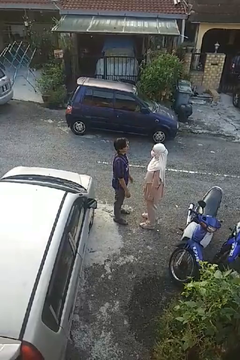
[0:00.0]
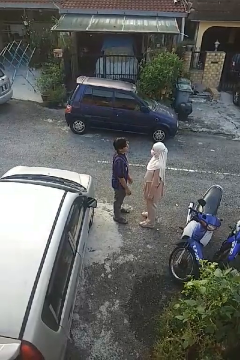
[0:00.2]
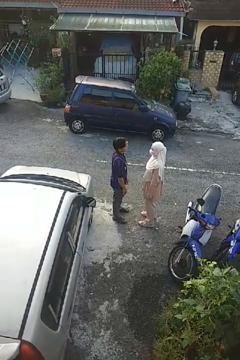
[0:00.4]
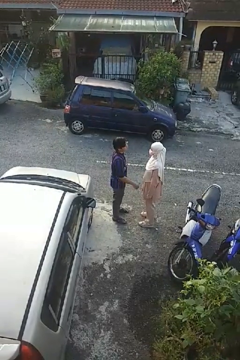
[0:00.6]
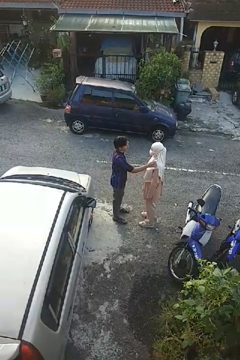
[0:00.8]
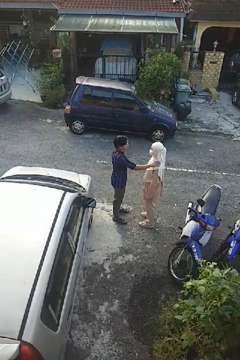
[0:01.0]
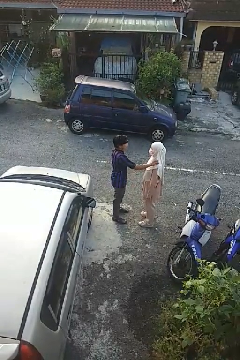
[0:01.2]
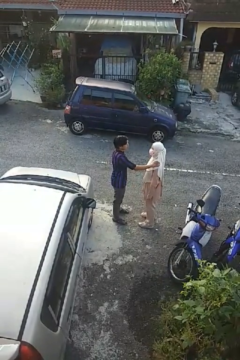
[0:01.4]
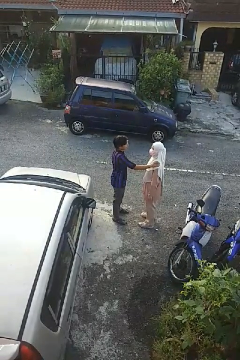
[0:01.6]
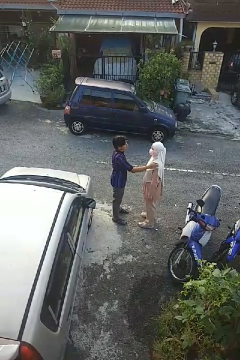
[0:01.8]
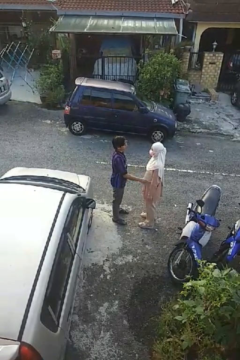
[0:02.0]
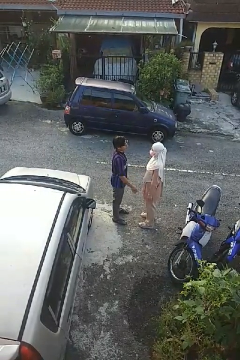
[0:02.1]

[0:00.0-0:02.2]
person pounds shoulders of person

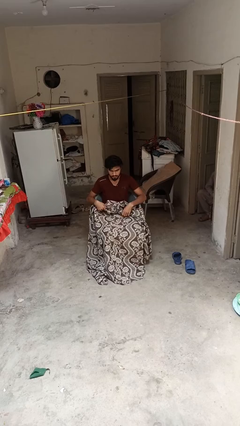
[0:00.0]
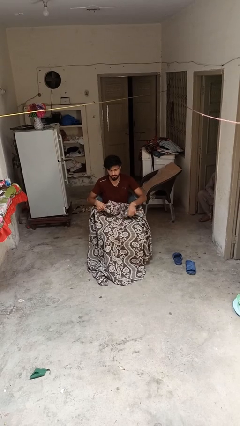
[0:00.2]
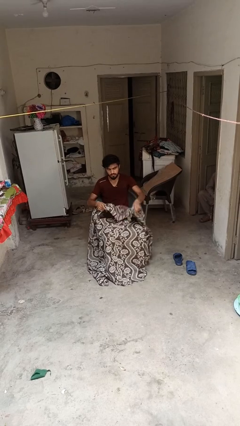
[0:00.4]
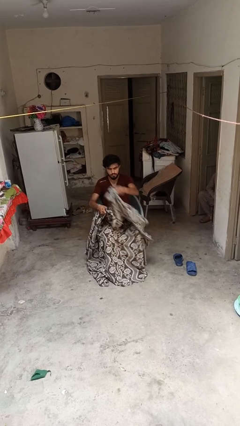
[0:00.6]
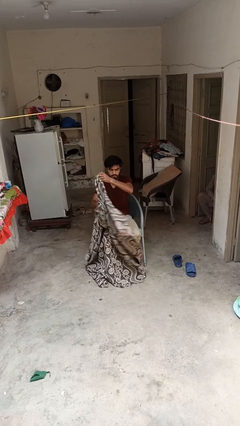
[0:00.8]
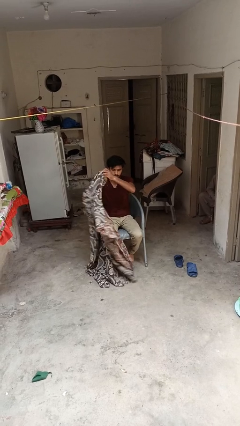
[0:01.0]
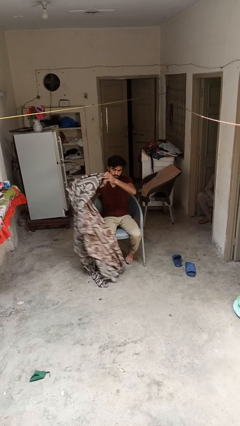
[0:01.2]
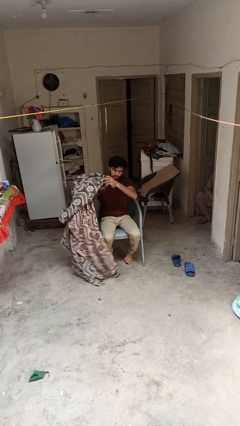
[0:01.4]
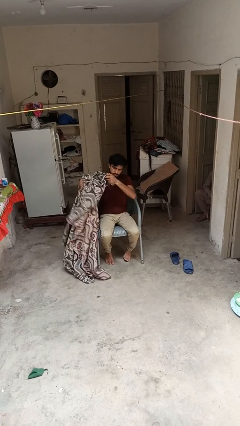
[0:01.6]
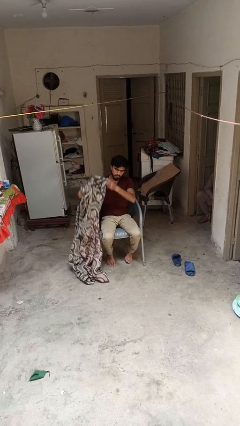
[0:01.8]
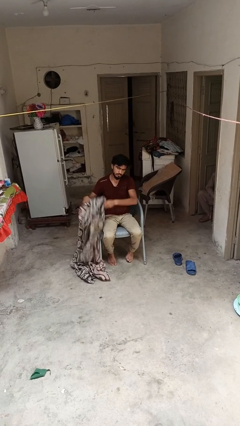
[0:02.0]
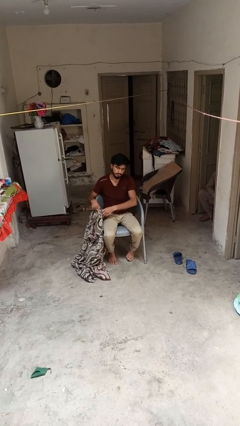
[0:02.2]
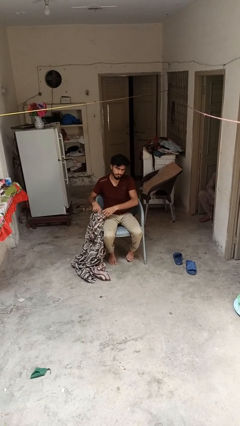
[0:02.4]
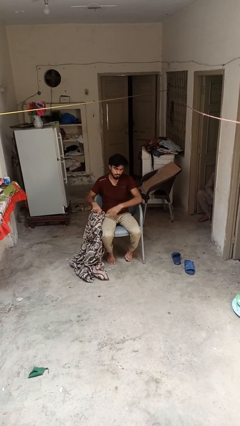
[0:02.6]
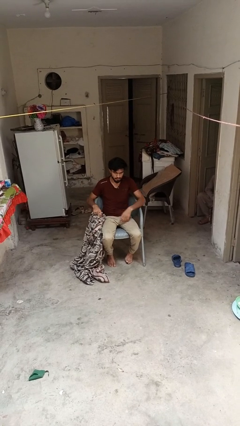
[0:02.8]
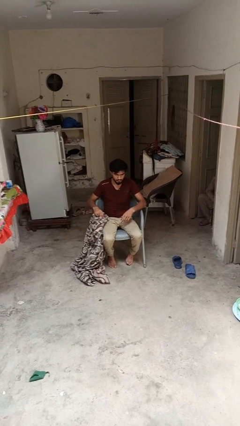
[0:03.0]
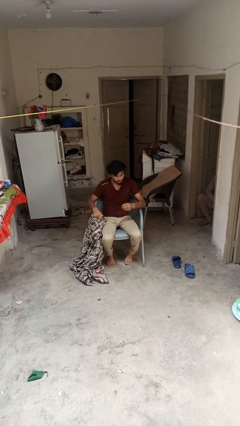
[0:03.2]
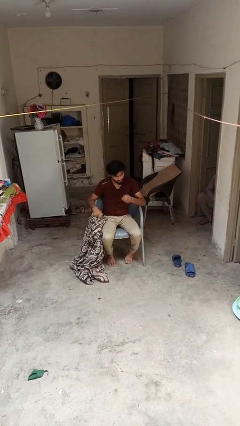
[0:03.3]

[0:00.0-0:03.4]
person uncovers with blanket

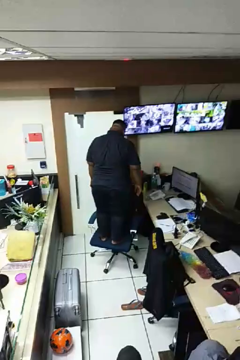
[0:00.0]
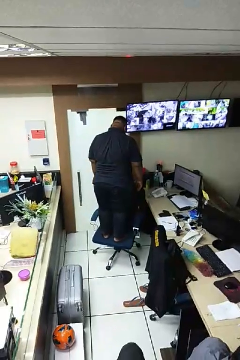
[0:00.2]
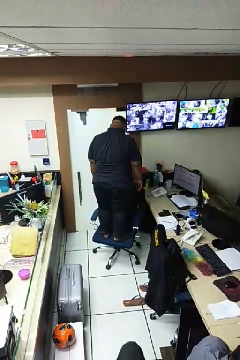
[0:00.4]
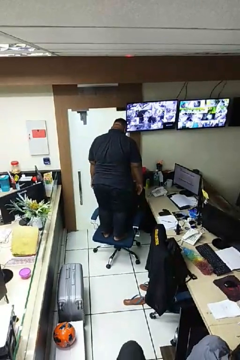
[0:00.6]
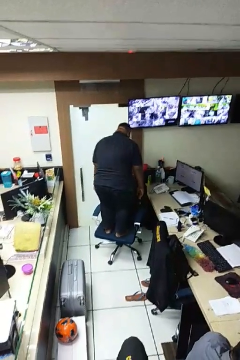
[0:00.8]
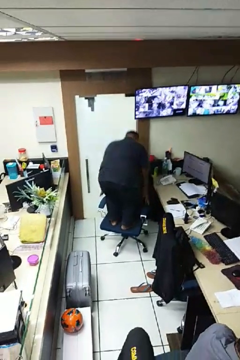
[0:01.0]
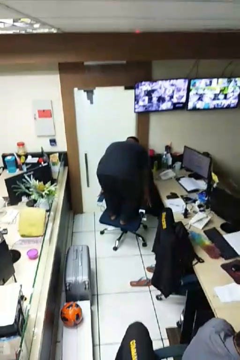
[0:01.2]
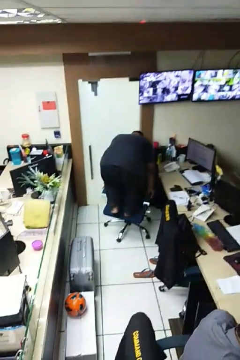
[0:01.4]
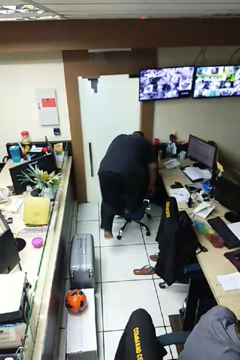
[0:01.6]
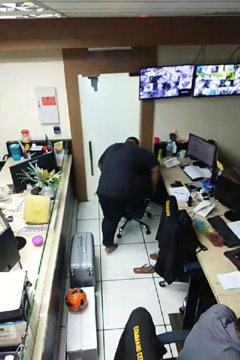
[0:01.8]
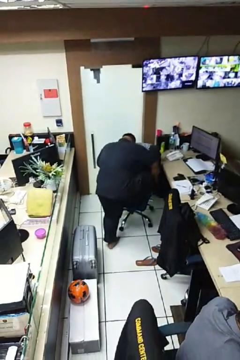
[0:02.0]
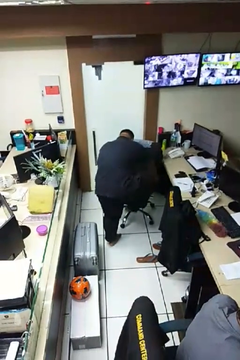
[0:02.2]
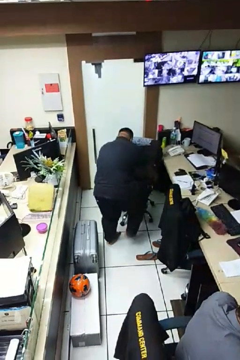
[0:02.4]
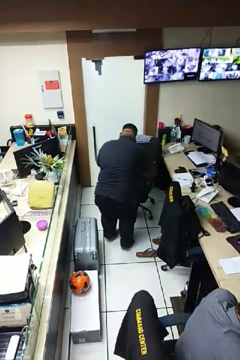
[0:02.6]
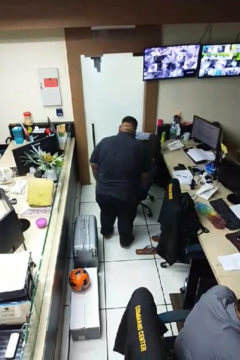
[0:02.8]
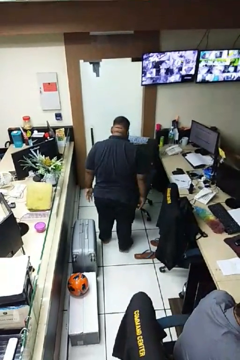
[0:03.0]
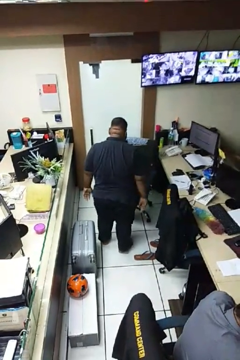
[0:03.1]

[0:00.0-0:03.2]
person climbs off chair

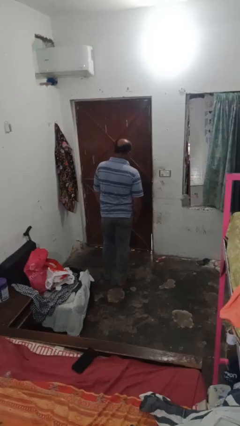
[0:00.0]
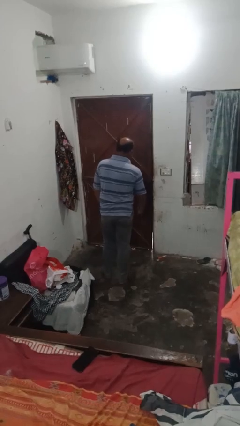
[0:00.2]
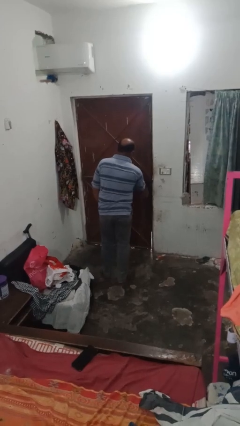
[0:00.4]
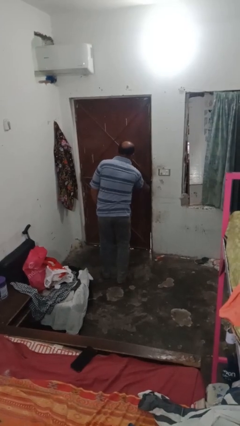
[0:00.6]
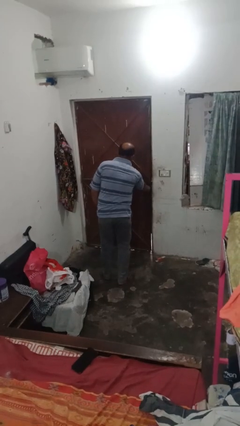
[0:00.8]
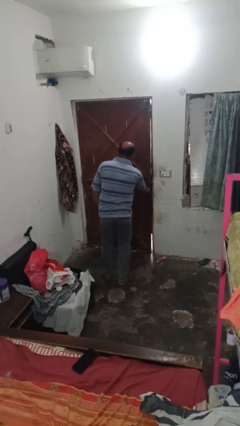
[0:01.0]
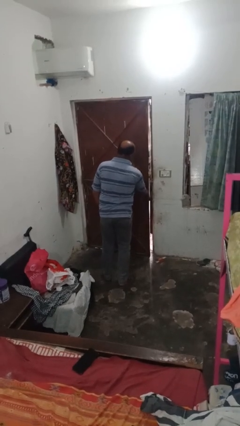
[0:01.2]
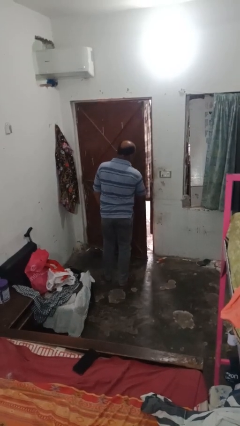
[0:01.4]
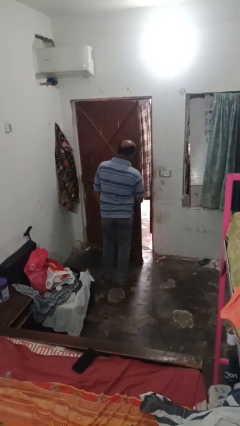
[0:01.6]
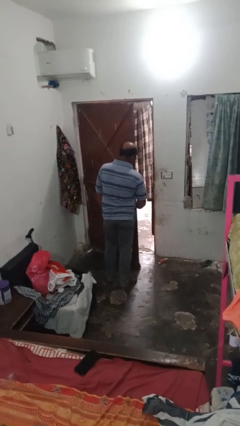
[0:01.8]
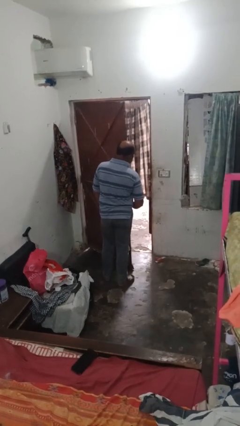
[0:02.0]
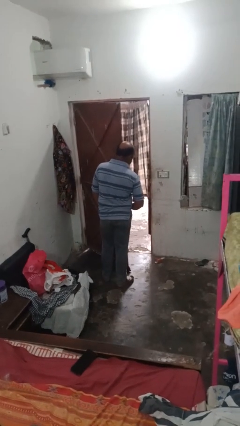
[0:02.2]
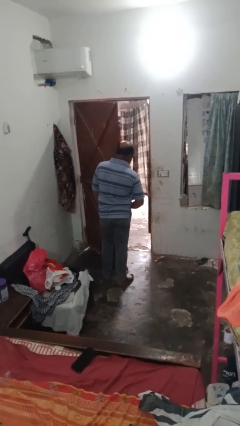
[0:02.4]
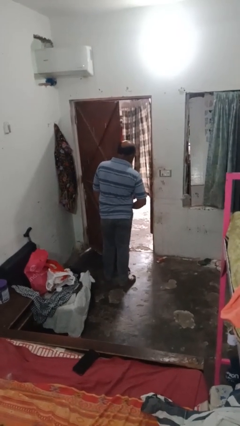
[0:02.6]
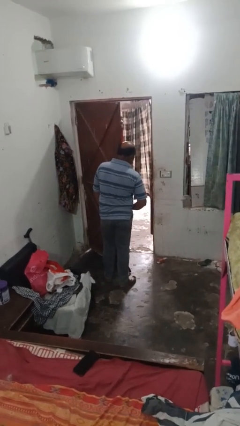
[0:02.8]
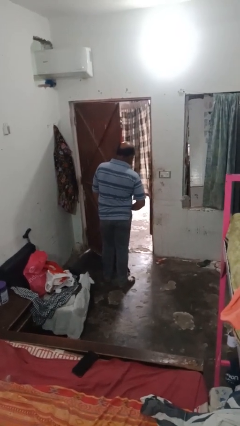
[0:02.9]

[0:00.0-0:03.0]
person opens closet door

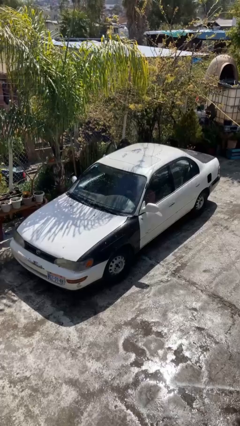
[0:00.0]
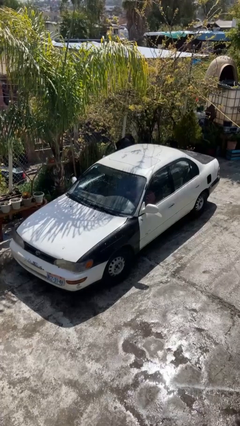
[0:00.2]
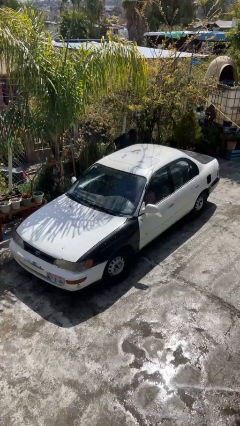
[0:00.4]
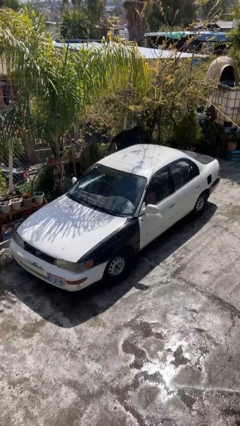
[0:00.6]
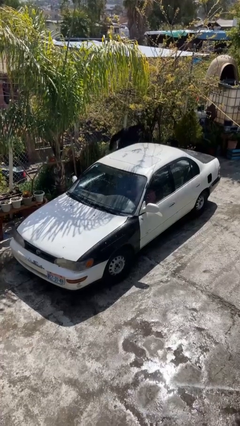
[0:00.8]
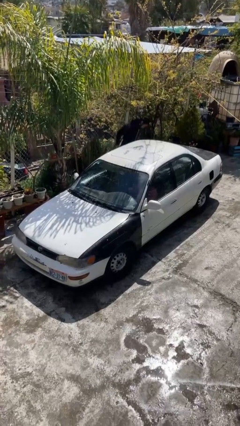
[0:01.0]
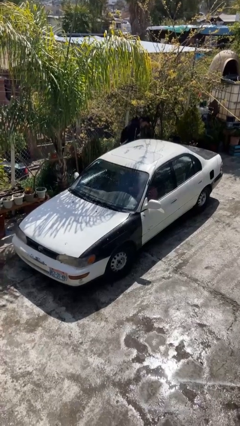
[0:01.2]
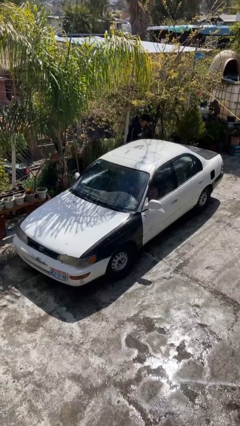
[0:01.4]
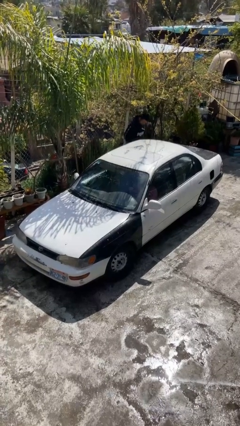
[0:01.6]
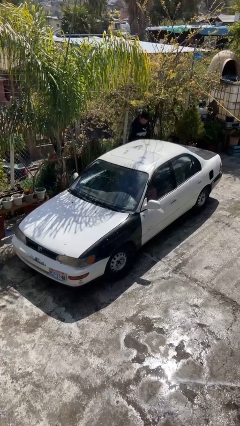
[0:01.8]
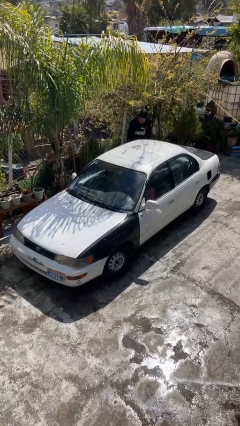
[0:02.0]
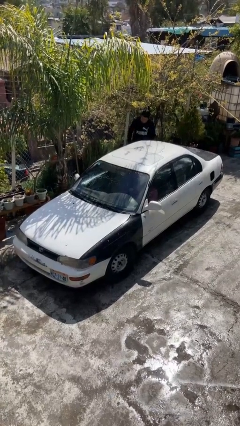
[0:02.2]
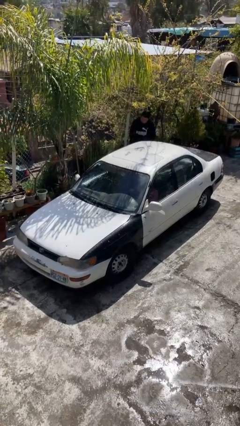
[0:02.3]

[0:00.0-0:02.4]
car drops off person

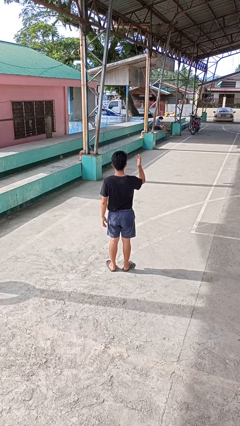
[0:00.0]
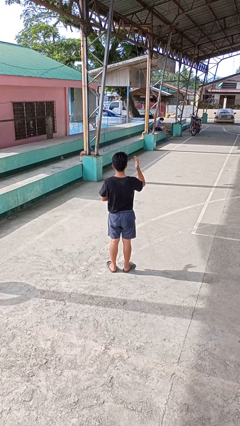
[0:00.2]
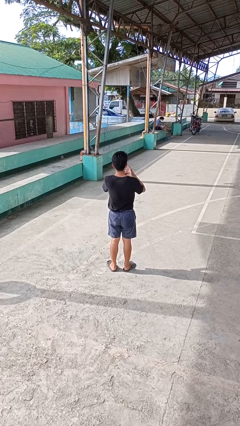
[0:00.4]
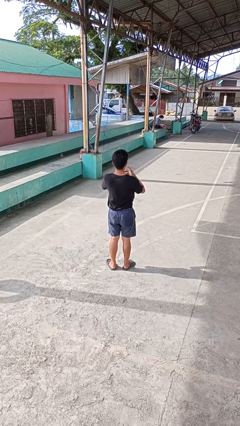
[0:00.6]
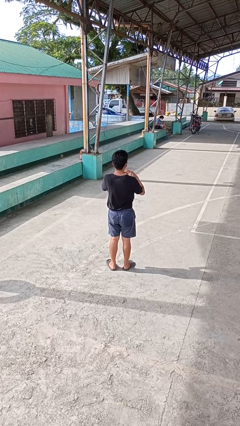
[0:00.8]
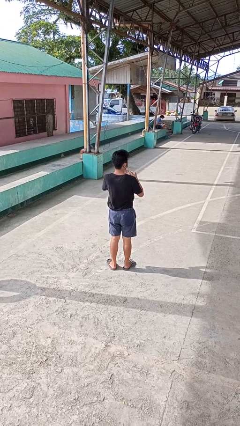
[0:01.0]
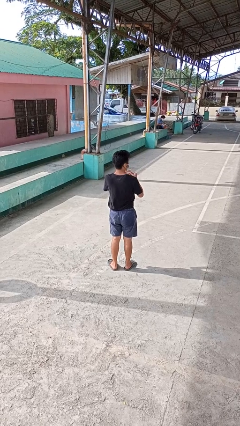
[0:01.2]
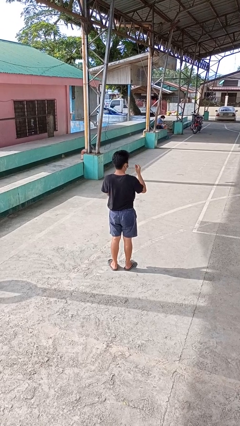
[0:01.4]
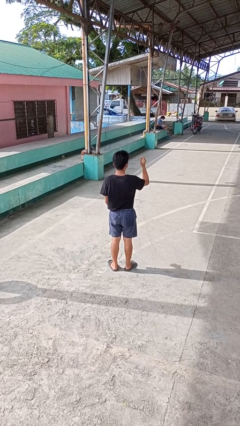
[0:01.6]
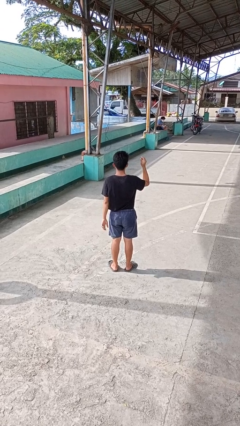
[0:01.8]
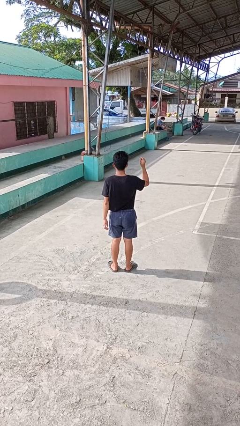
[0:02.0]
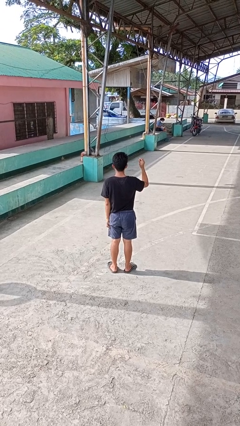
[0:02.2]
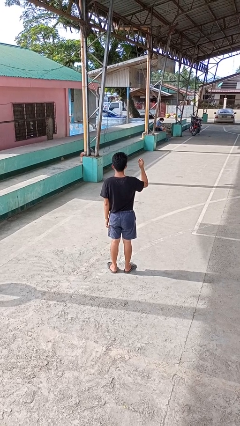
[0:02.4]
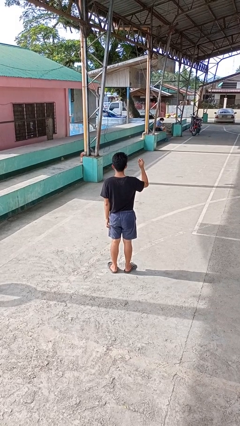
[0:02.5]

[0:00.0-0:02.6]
person takes off ring

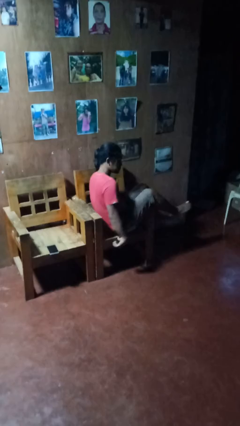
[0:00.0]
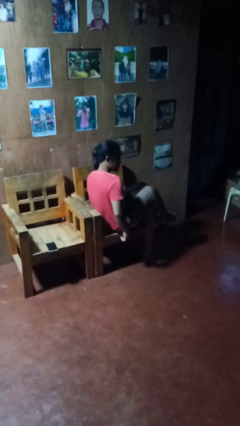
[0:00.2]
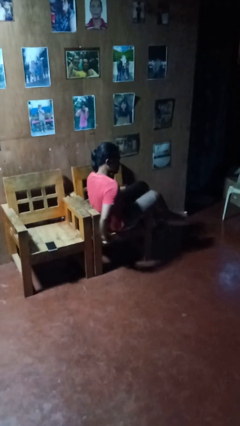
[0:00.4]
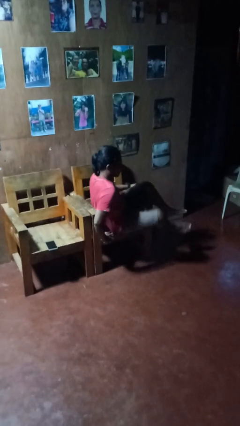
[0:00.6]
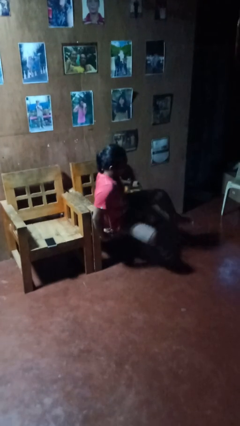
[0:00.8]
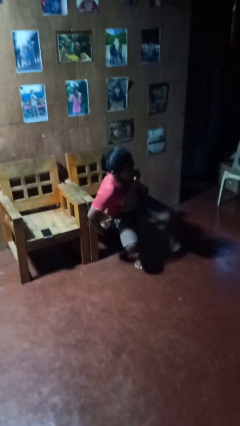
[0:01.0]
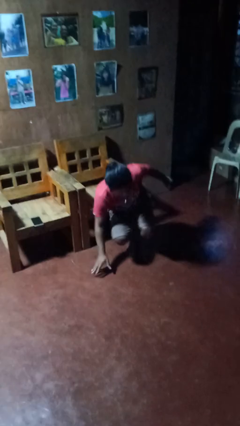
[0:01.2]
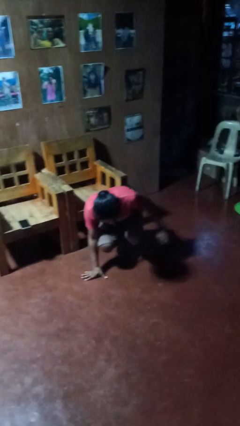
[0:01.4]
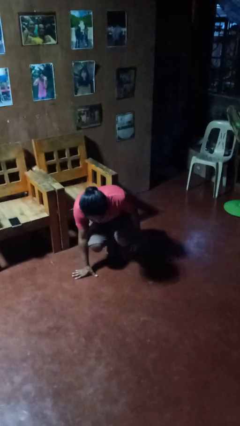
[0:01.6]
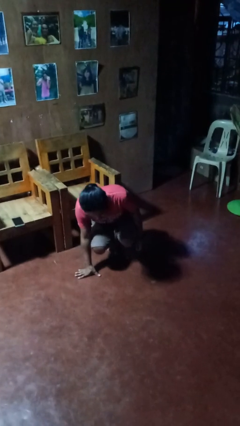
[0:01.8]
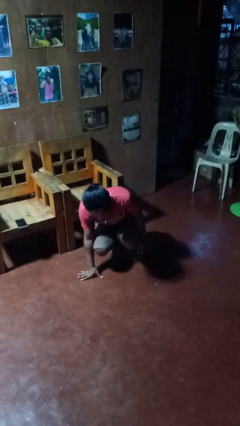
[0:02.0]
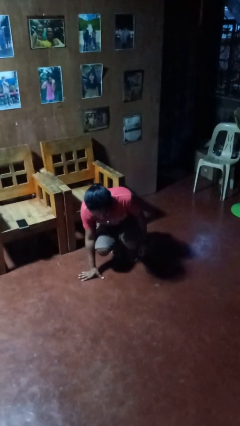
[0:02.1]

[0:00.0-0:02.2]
person falls from chair
